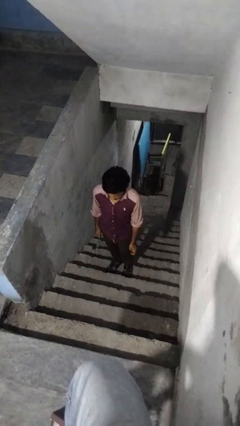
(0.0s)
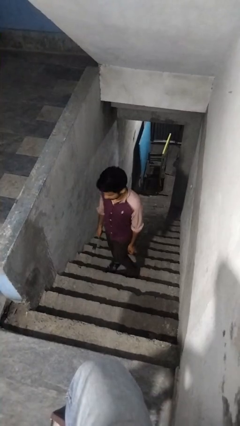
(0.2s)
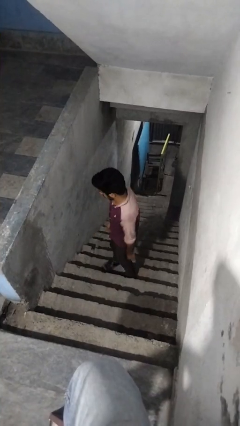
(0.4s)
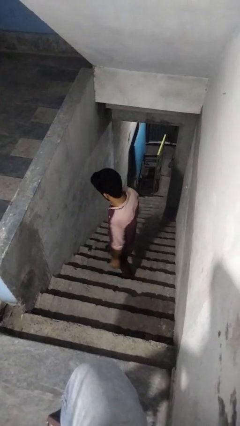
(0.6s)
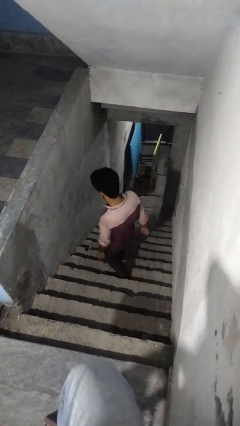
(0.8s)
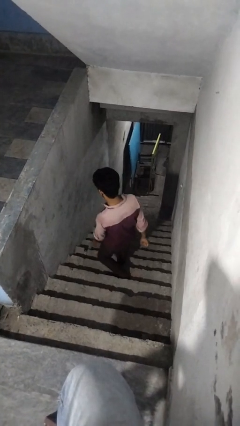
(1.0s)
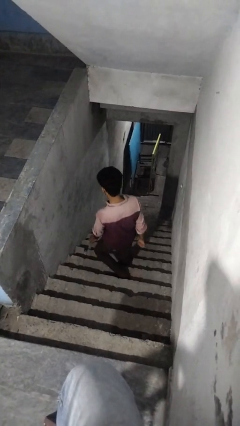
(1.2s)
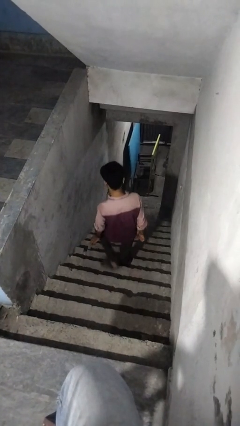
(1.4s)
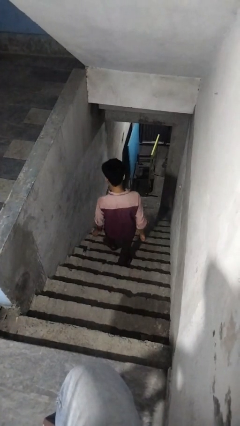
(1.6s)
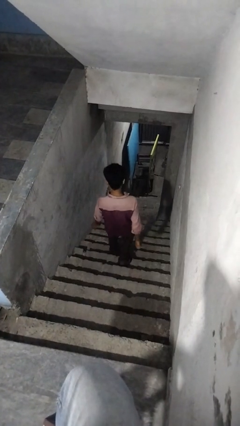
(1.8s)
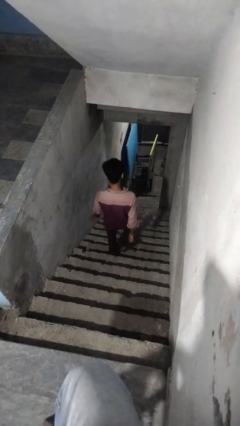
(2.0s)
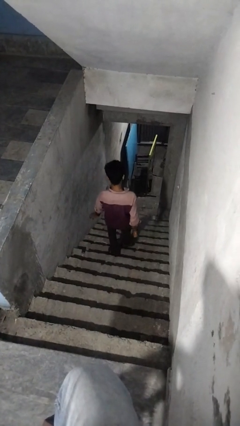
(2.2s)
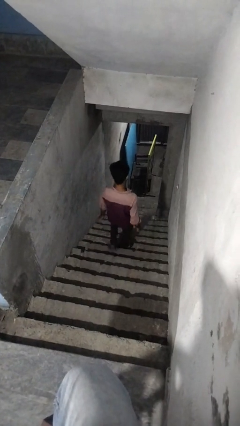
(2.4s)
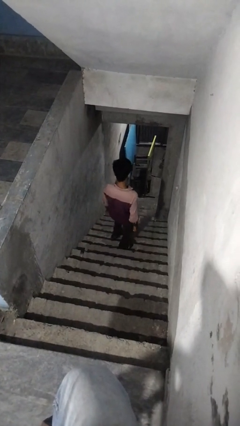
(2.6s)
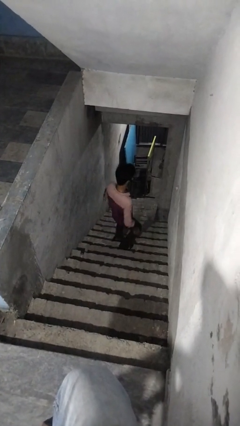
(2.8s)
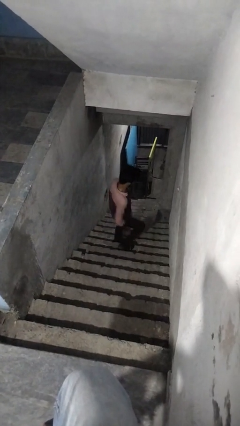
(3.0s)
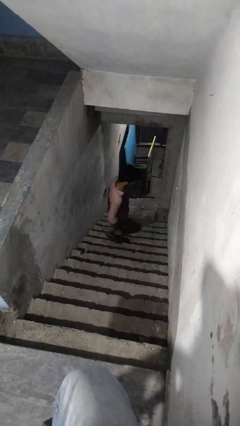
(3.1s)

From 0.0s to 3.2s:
person climbs down stairs

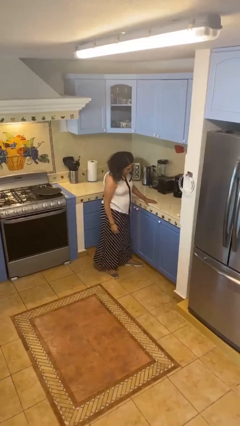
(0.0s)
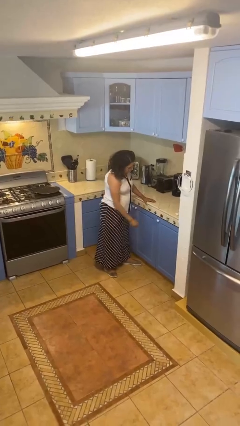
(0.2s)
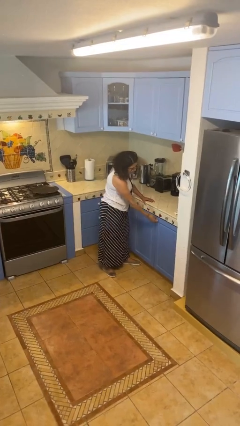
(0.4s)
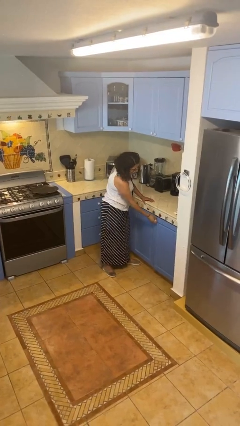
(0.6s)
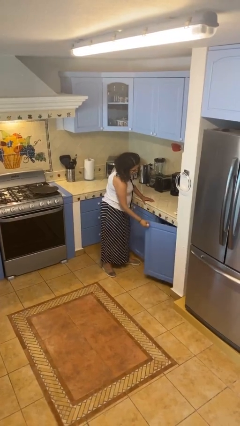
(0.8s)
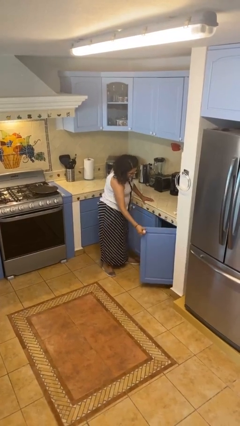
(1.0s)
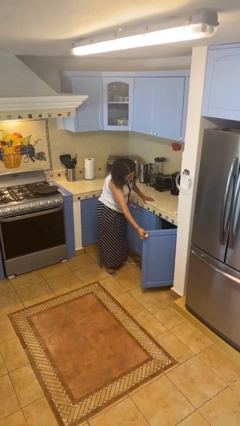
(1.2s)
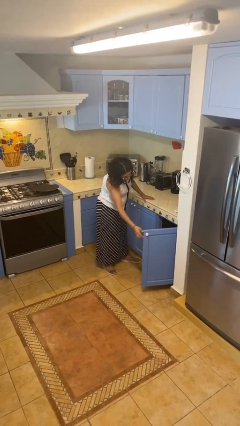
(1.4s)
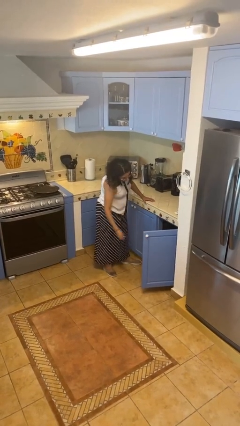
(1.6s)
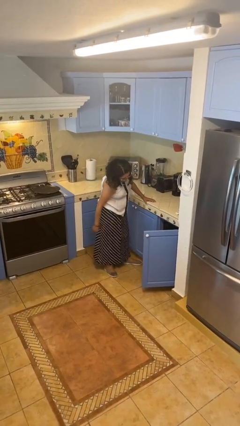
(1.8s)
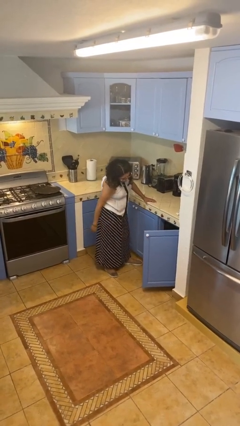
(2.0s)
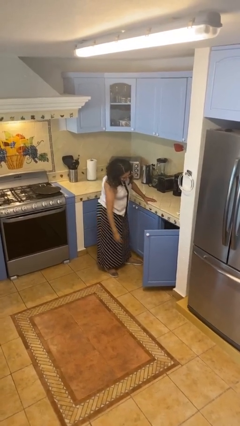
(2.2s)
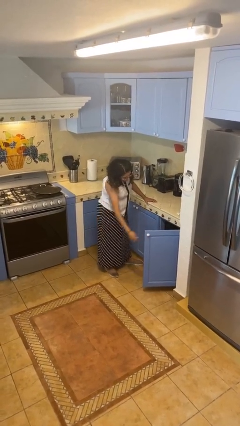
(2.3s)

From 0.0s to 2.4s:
person opens cabinet

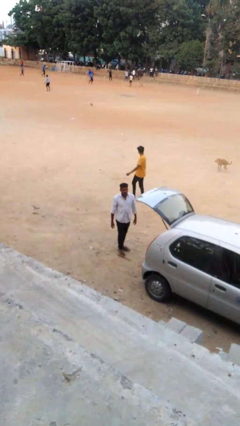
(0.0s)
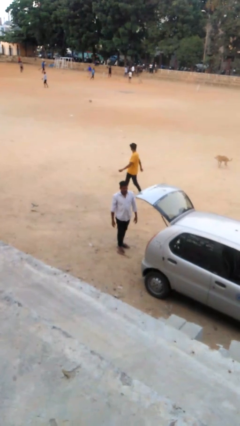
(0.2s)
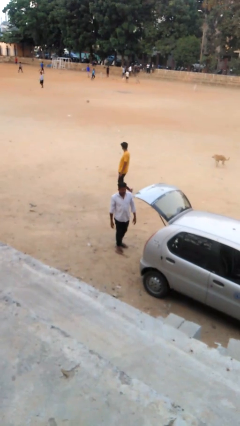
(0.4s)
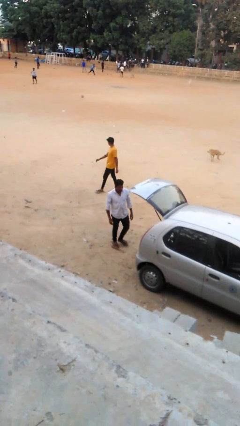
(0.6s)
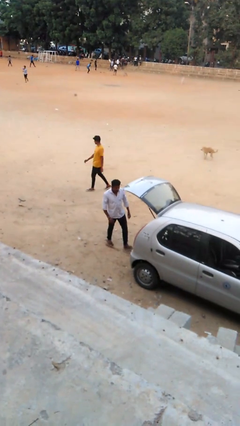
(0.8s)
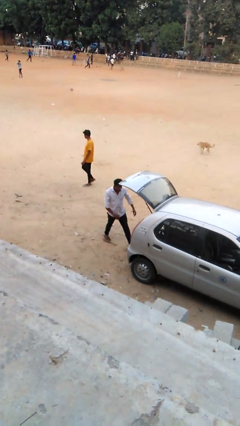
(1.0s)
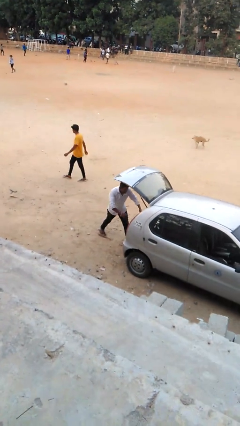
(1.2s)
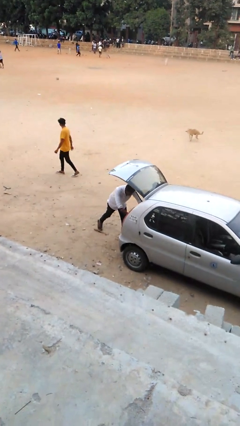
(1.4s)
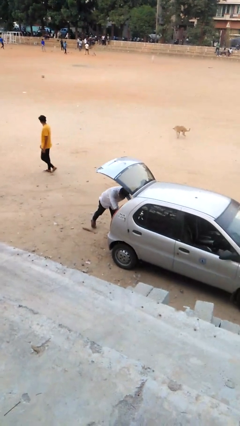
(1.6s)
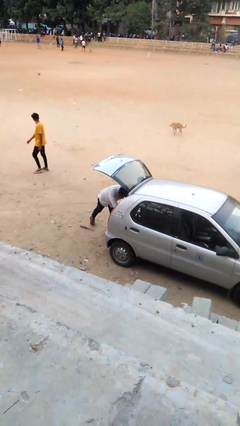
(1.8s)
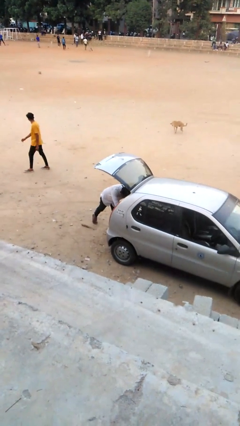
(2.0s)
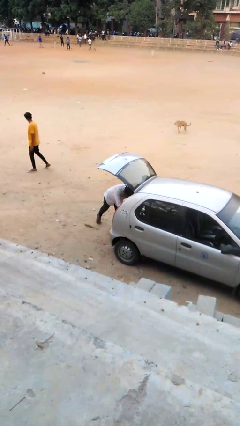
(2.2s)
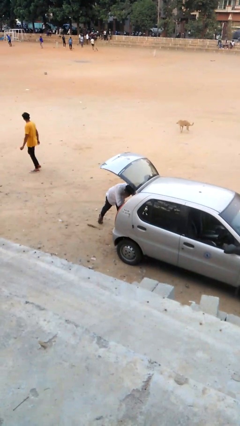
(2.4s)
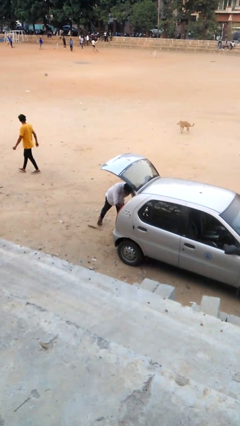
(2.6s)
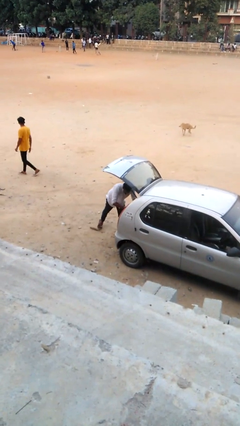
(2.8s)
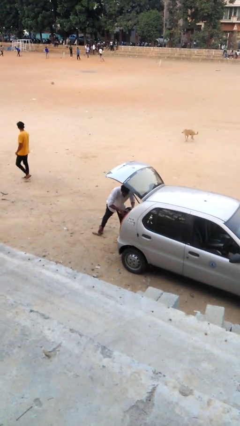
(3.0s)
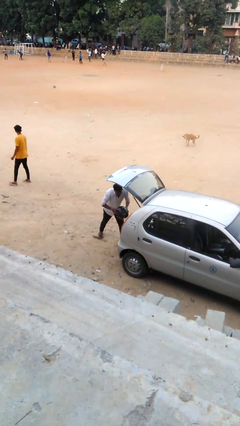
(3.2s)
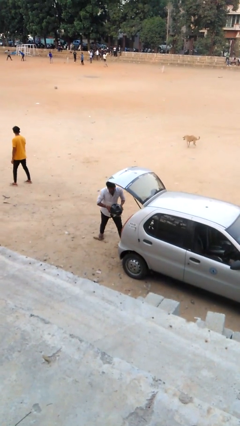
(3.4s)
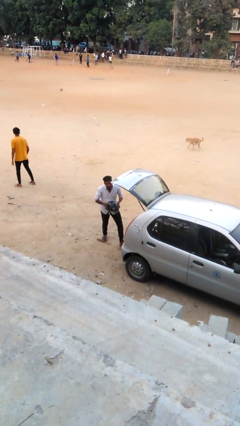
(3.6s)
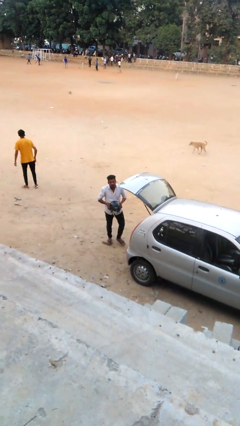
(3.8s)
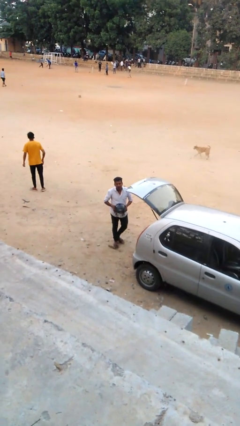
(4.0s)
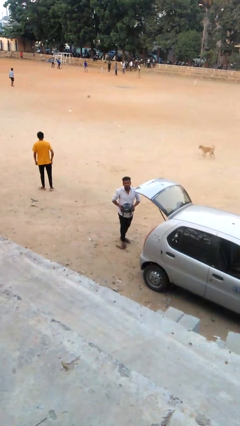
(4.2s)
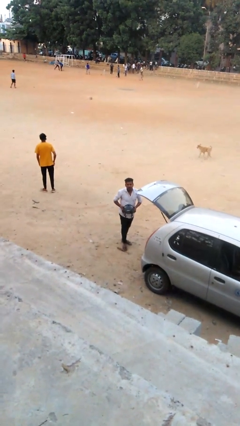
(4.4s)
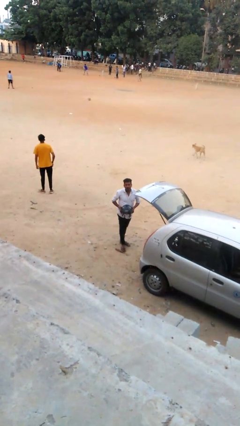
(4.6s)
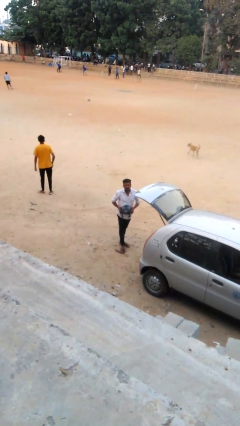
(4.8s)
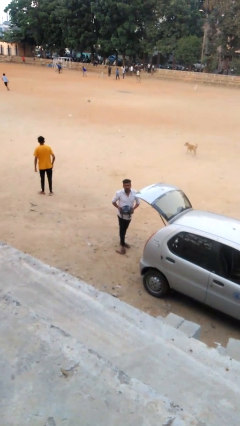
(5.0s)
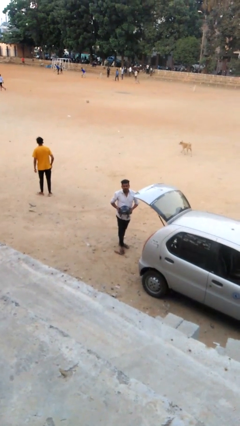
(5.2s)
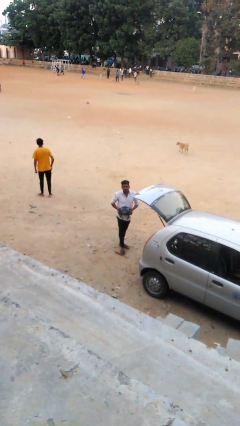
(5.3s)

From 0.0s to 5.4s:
person unloads car

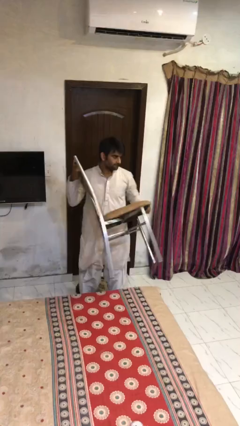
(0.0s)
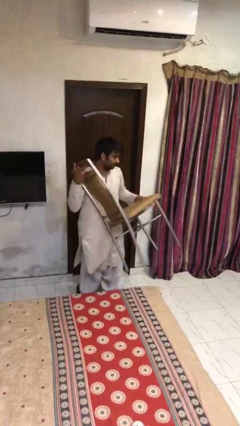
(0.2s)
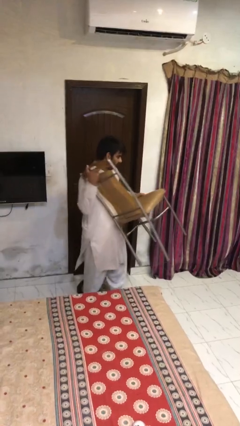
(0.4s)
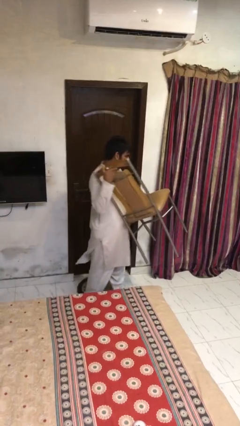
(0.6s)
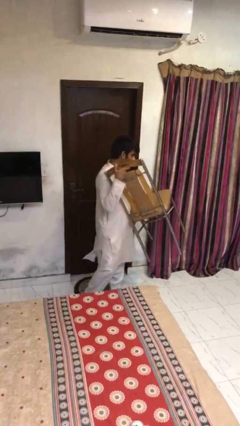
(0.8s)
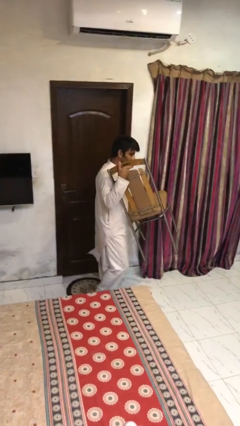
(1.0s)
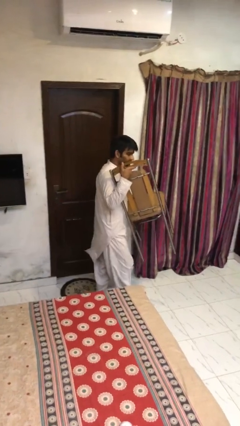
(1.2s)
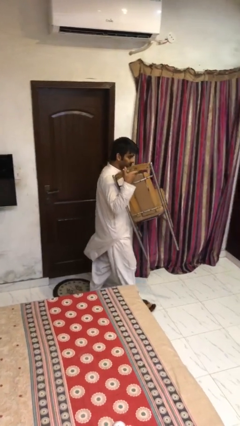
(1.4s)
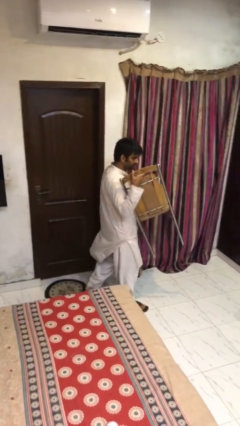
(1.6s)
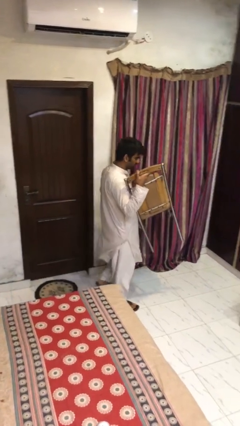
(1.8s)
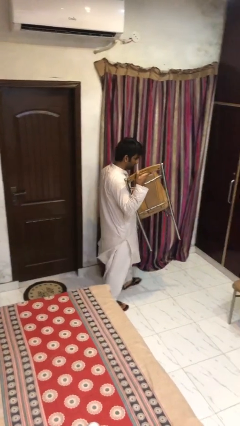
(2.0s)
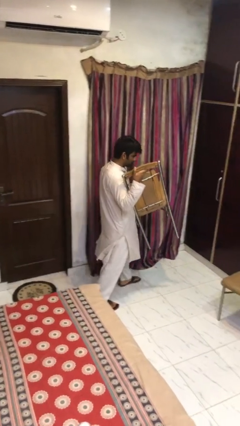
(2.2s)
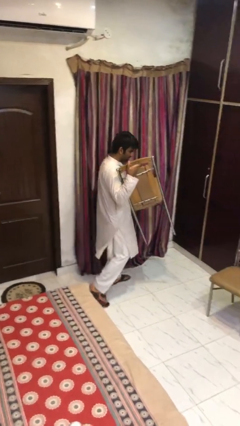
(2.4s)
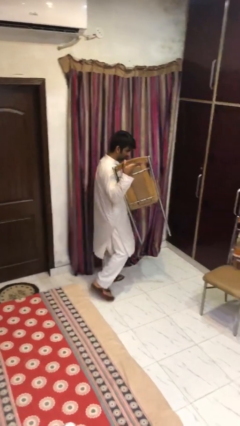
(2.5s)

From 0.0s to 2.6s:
person carries heavy object

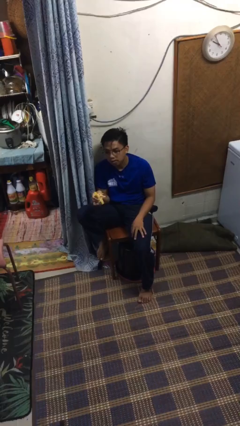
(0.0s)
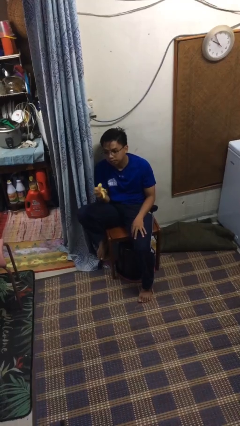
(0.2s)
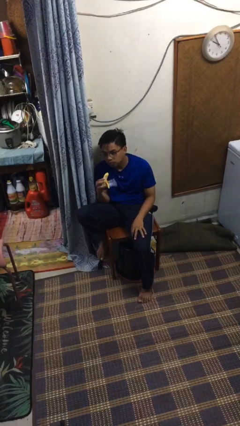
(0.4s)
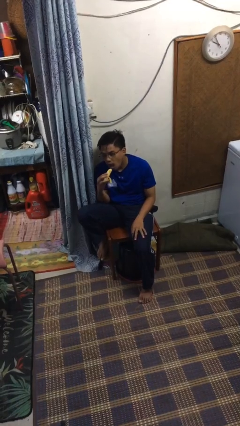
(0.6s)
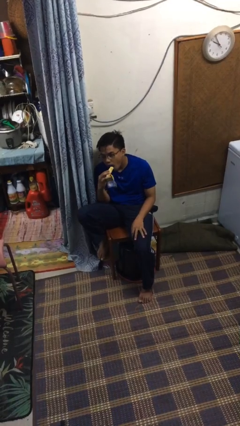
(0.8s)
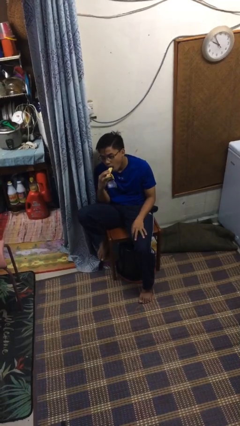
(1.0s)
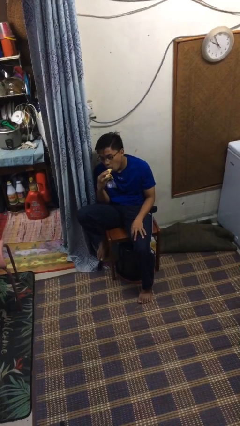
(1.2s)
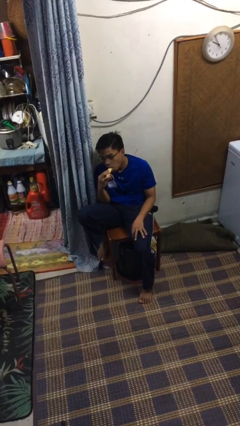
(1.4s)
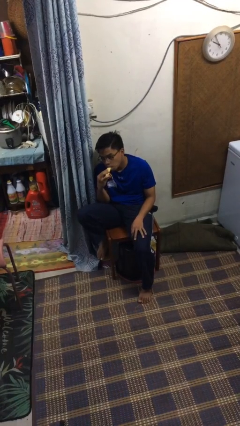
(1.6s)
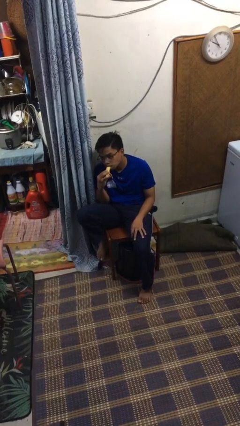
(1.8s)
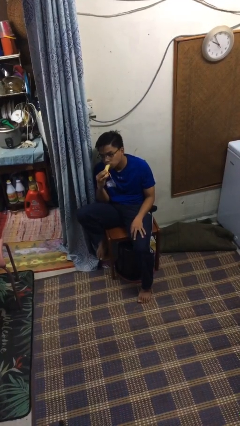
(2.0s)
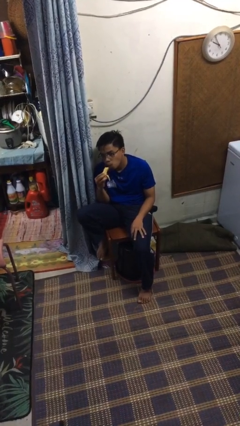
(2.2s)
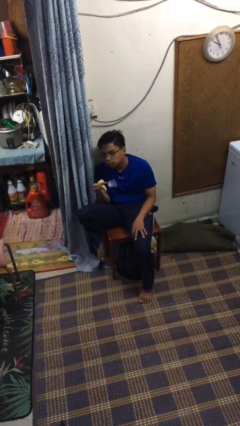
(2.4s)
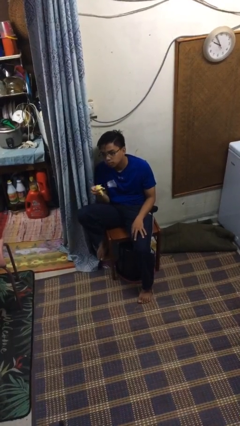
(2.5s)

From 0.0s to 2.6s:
person eats banana

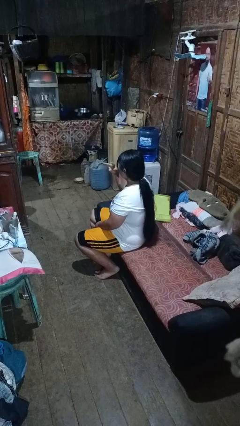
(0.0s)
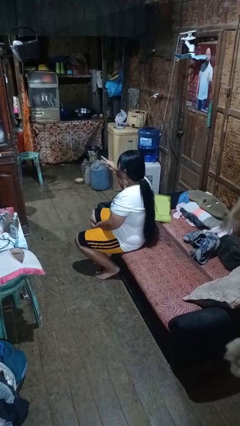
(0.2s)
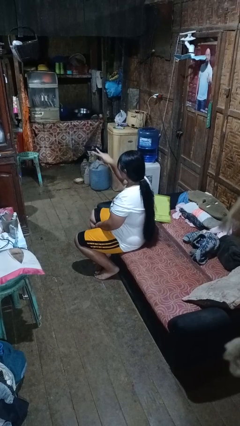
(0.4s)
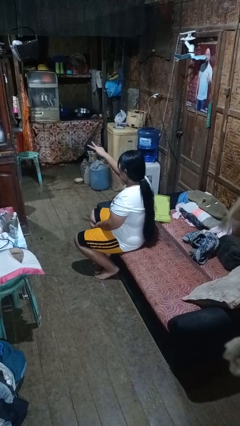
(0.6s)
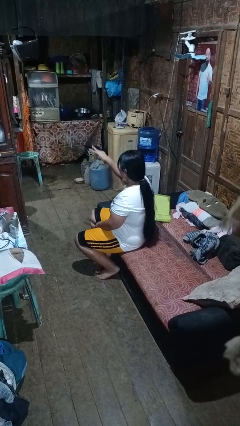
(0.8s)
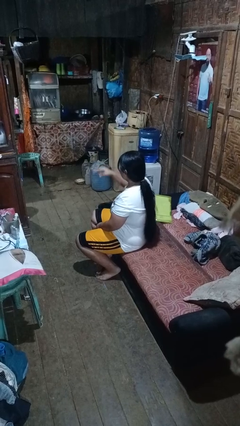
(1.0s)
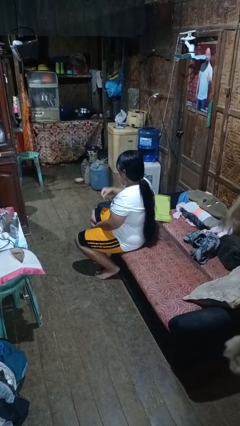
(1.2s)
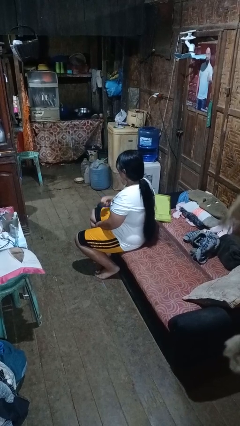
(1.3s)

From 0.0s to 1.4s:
person gestures watch closely
